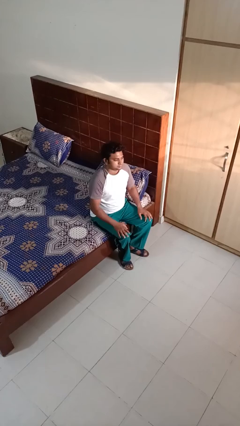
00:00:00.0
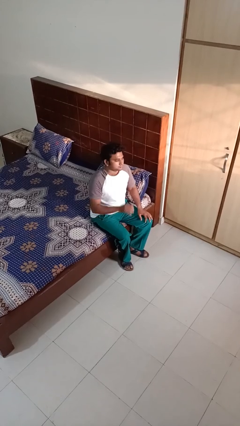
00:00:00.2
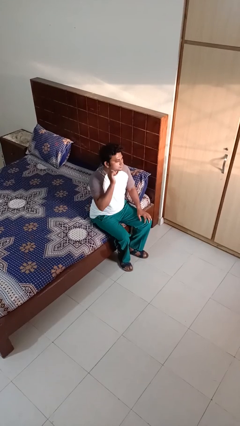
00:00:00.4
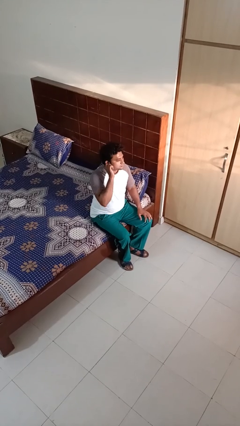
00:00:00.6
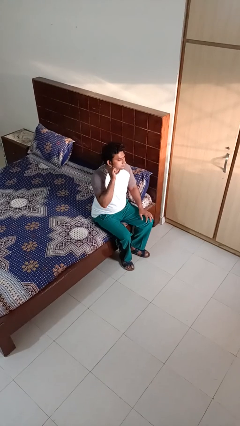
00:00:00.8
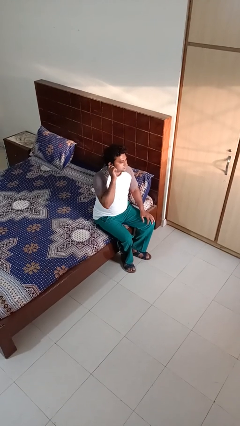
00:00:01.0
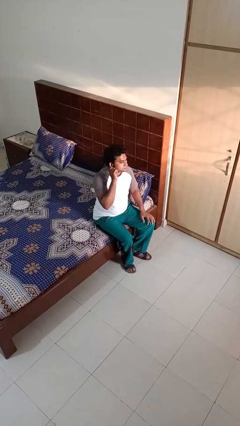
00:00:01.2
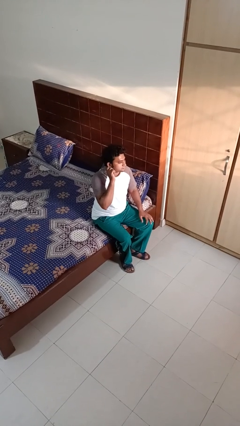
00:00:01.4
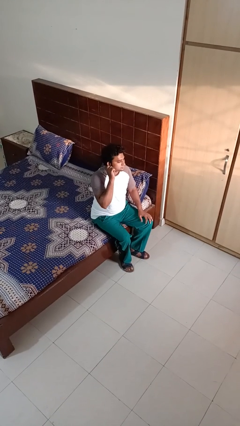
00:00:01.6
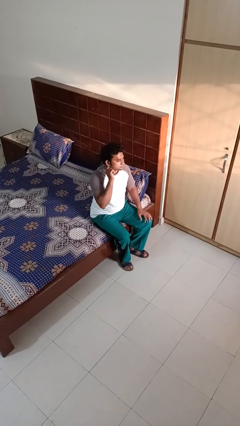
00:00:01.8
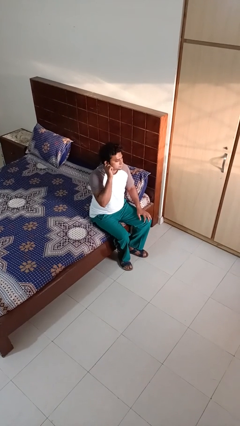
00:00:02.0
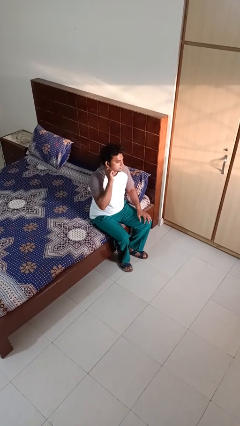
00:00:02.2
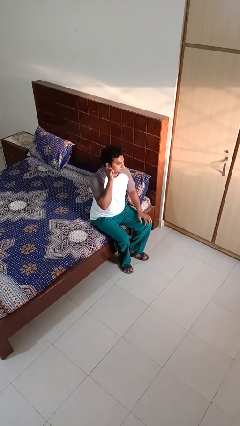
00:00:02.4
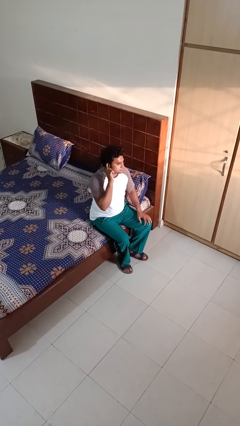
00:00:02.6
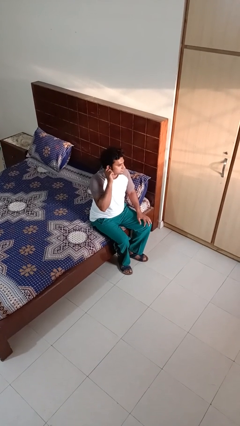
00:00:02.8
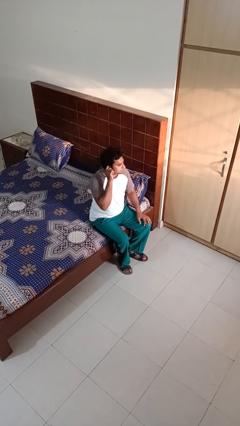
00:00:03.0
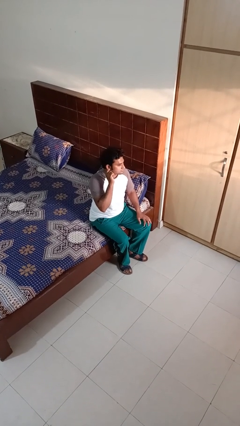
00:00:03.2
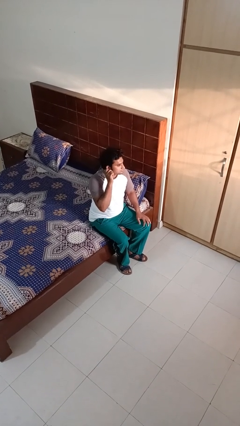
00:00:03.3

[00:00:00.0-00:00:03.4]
person touches earlobe

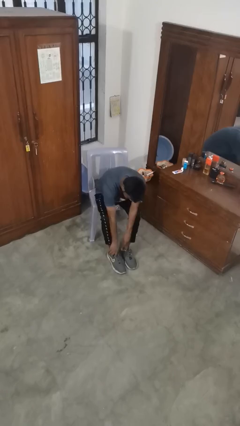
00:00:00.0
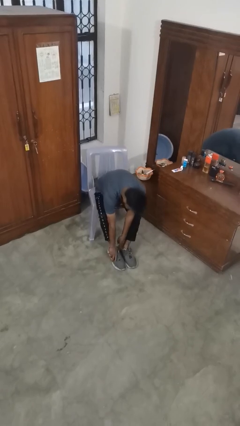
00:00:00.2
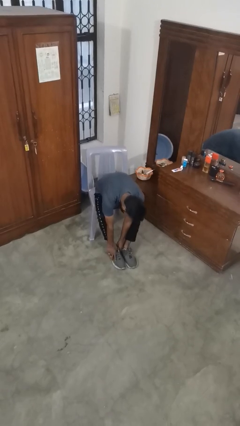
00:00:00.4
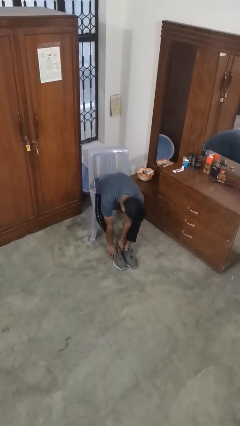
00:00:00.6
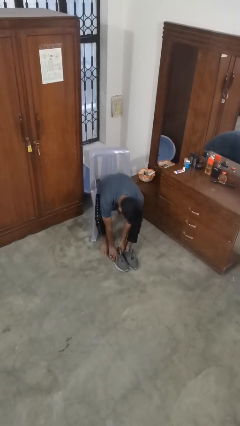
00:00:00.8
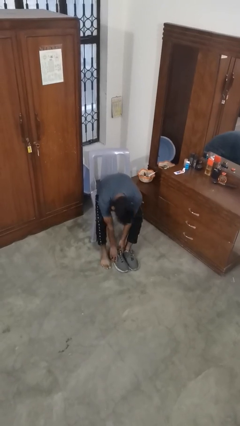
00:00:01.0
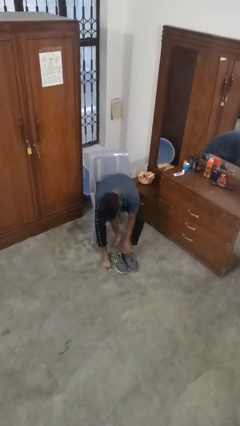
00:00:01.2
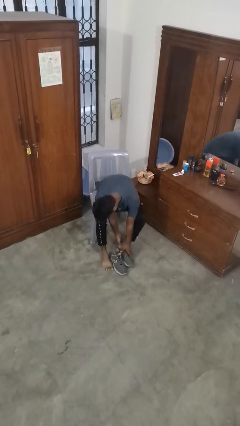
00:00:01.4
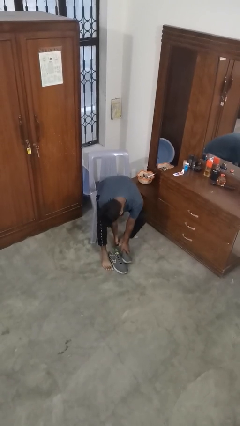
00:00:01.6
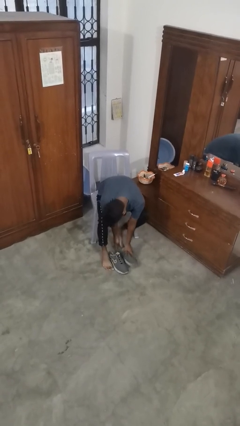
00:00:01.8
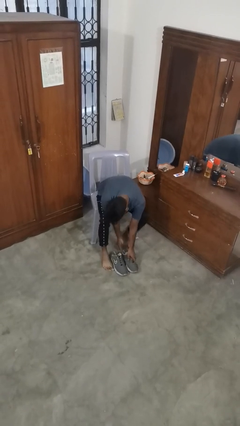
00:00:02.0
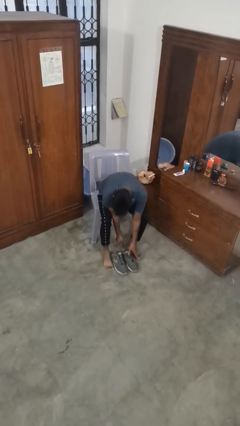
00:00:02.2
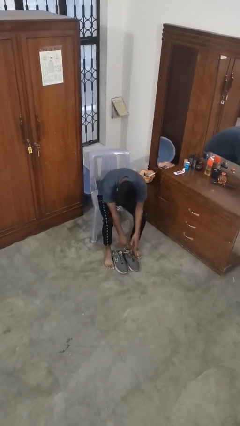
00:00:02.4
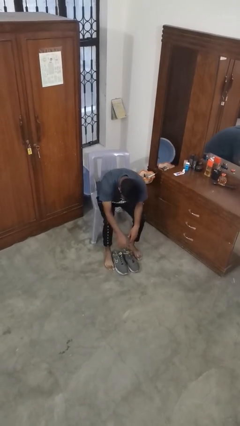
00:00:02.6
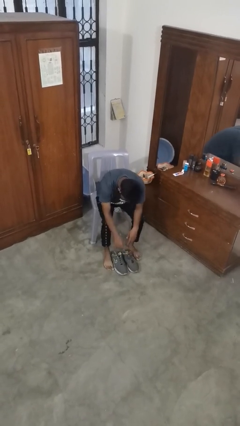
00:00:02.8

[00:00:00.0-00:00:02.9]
person takes off shoes

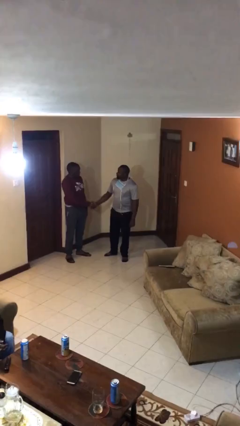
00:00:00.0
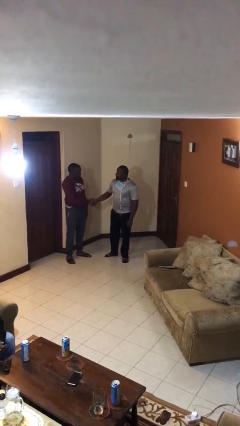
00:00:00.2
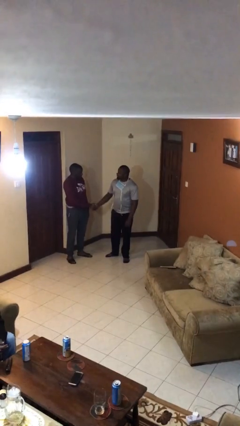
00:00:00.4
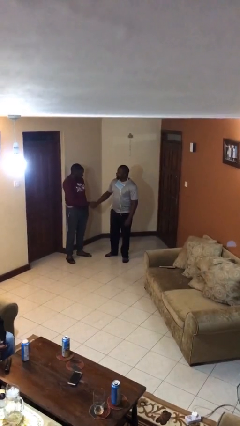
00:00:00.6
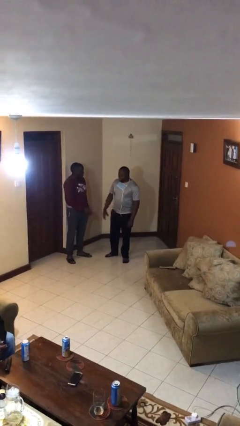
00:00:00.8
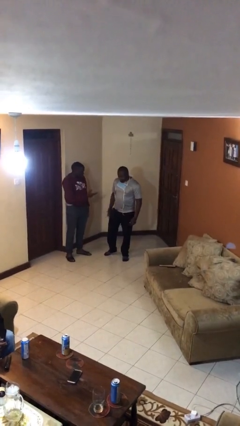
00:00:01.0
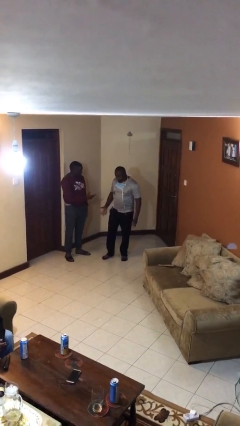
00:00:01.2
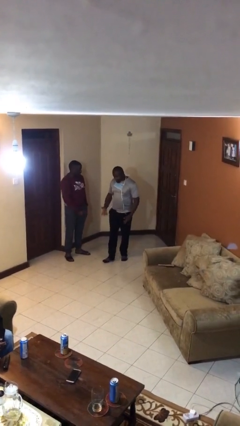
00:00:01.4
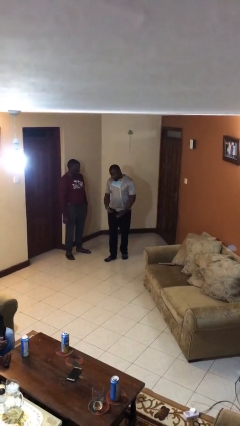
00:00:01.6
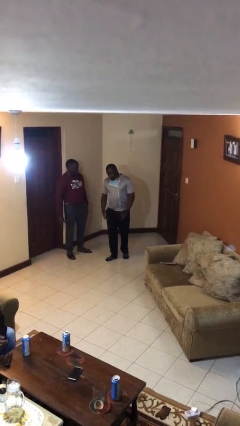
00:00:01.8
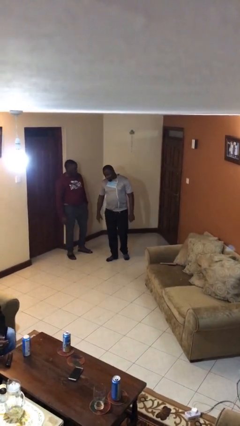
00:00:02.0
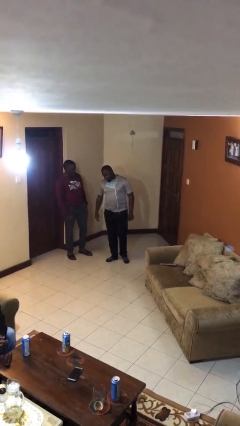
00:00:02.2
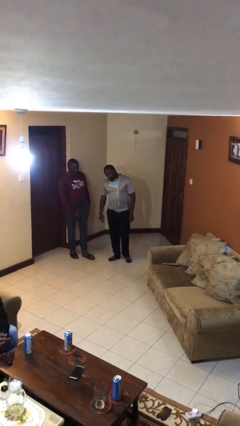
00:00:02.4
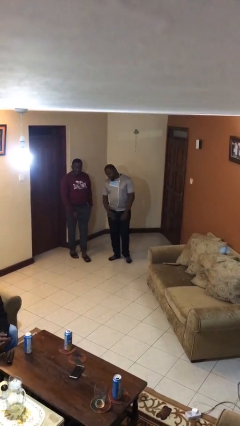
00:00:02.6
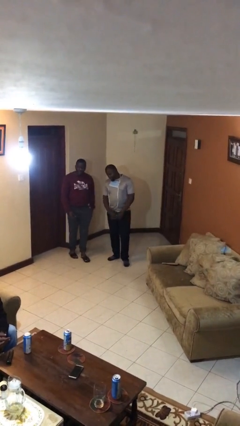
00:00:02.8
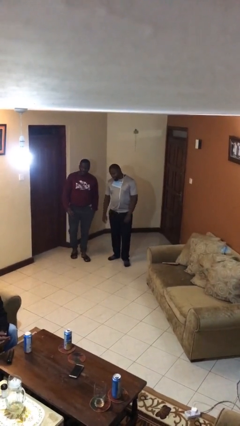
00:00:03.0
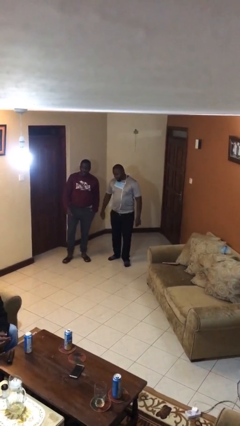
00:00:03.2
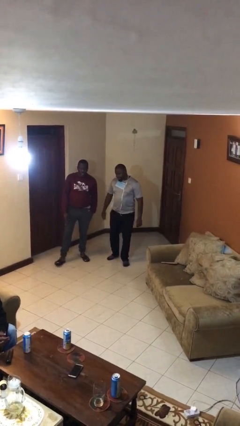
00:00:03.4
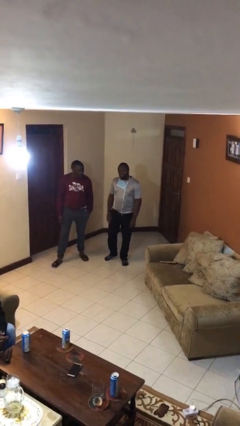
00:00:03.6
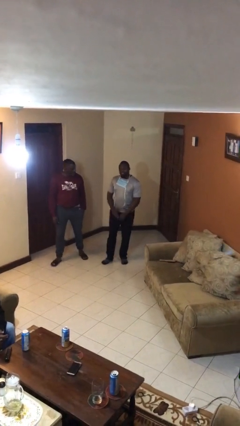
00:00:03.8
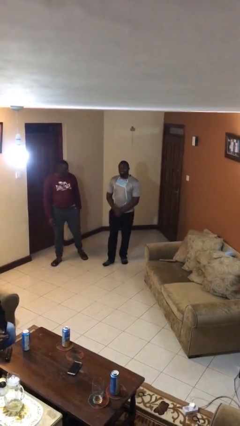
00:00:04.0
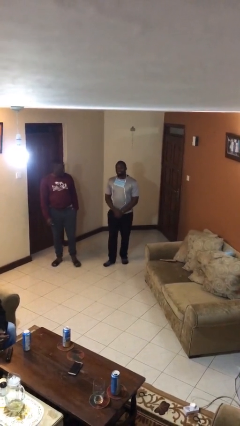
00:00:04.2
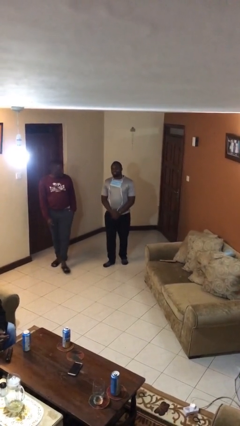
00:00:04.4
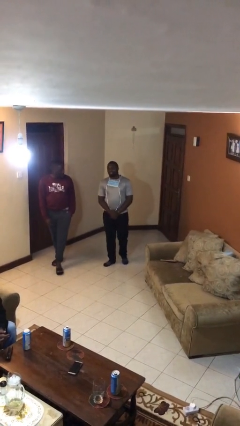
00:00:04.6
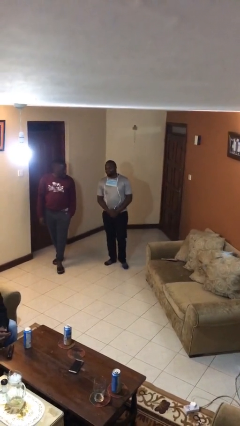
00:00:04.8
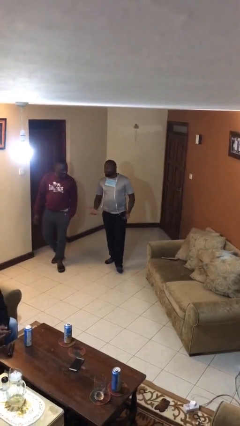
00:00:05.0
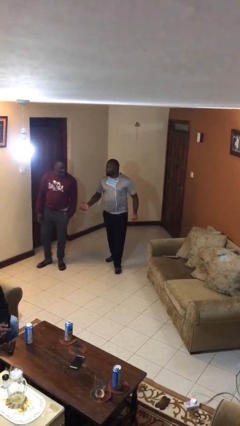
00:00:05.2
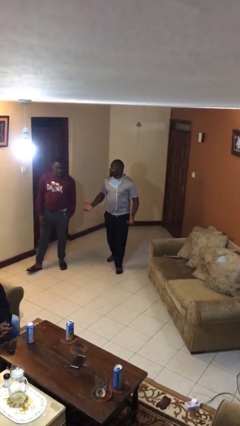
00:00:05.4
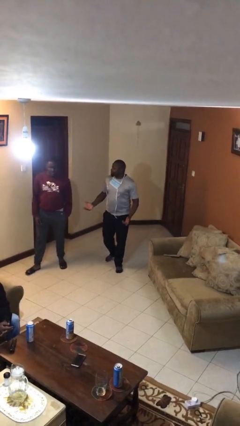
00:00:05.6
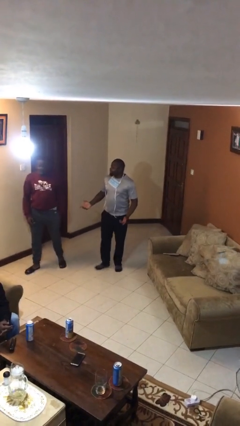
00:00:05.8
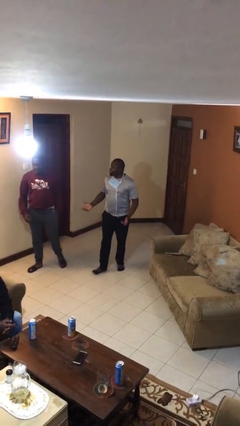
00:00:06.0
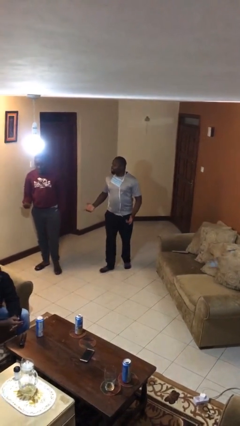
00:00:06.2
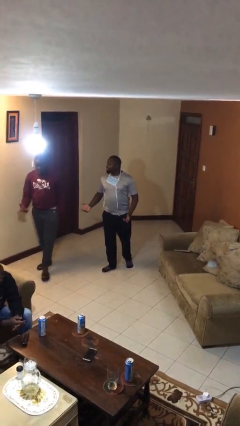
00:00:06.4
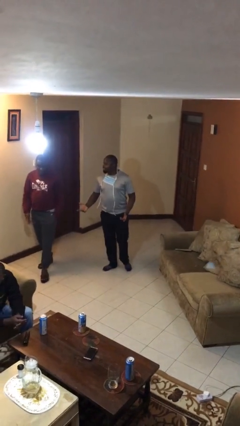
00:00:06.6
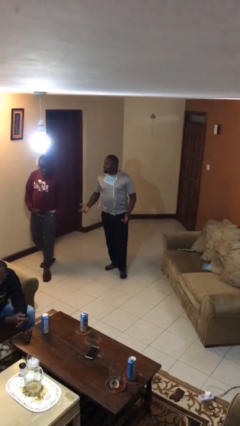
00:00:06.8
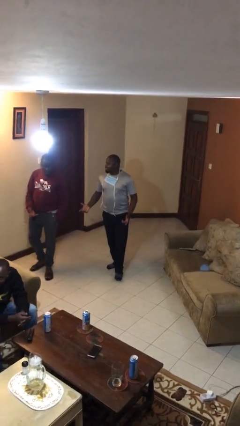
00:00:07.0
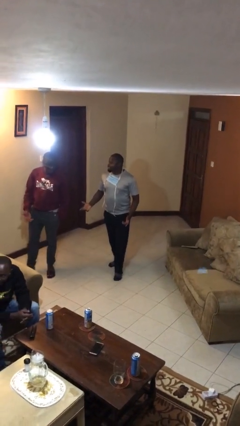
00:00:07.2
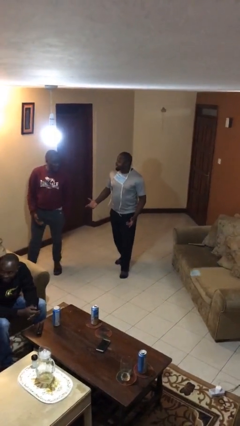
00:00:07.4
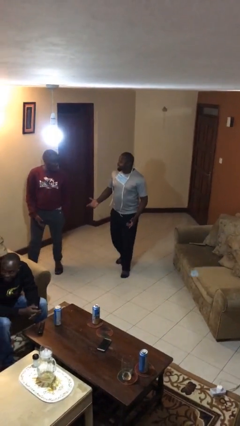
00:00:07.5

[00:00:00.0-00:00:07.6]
person talks to person

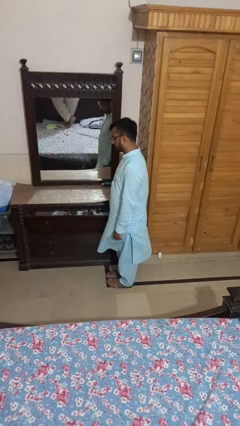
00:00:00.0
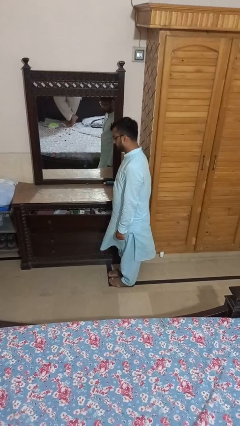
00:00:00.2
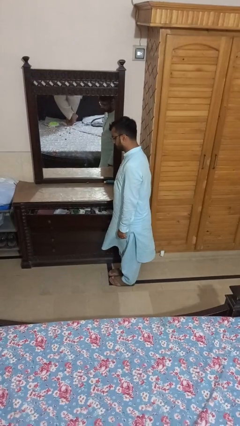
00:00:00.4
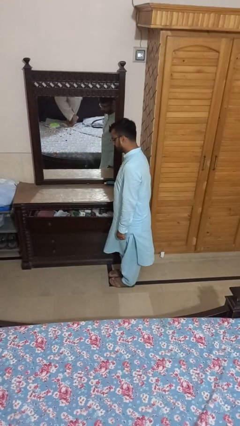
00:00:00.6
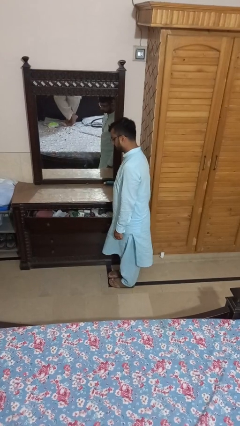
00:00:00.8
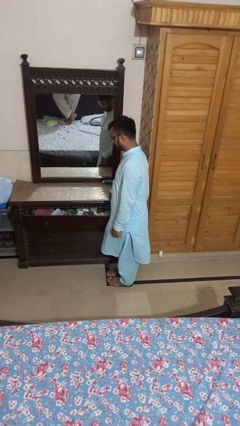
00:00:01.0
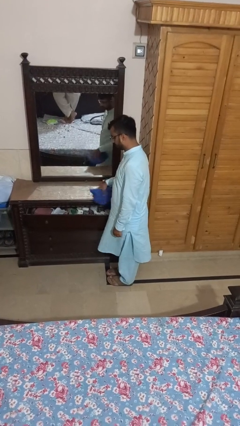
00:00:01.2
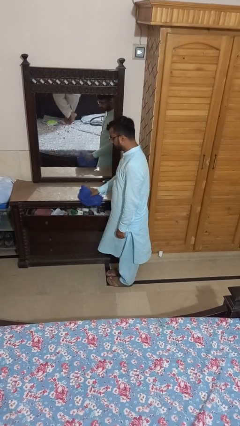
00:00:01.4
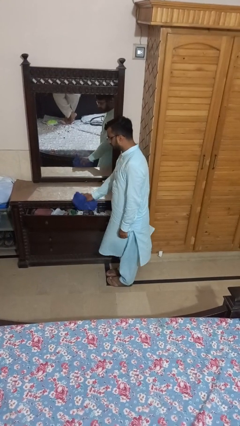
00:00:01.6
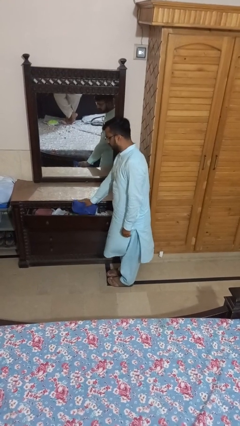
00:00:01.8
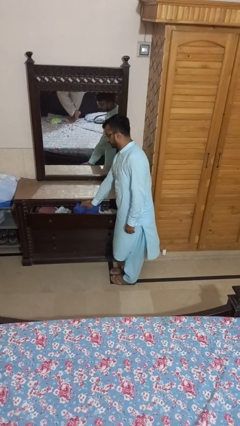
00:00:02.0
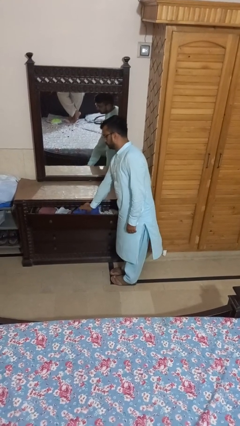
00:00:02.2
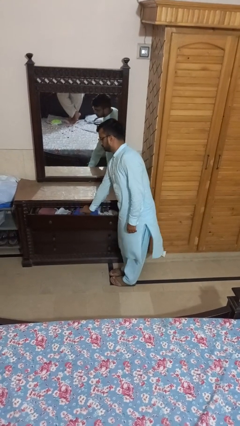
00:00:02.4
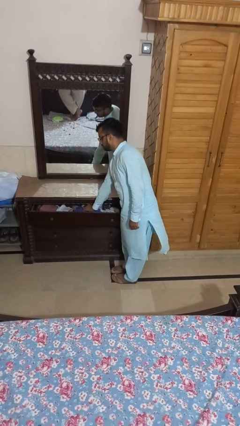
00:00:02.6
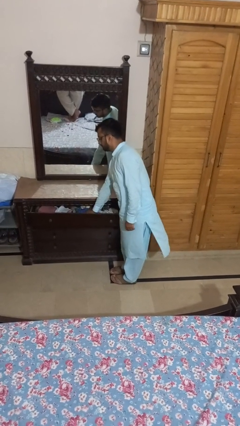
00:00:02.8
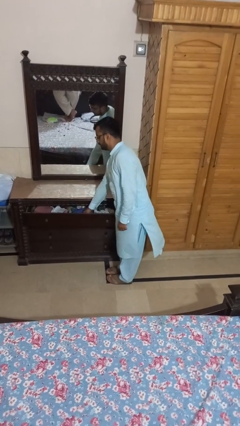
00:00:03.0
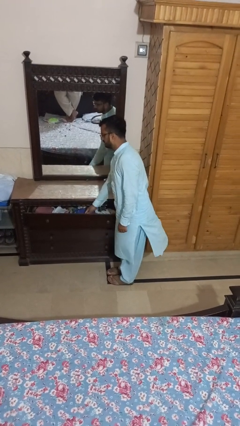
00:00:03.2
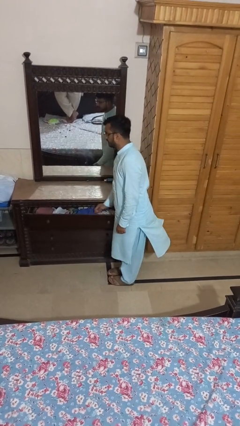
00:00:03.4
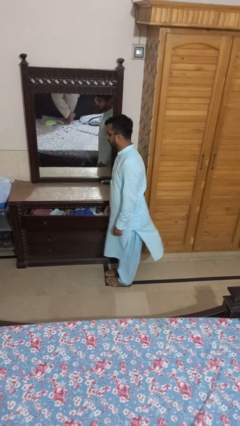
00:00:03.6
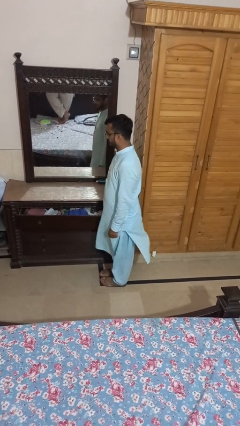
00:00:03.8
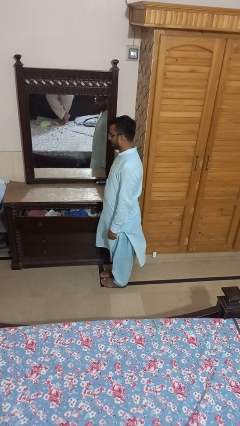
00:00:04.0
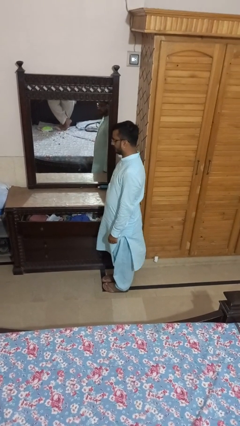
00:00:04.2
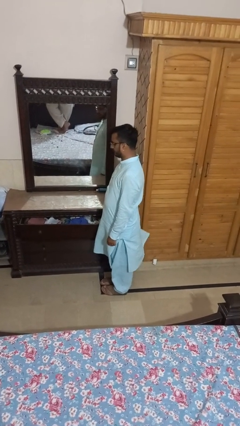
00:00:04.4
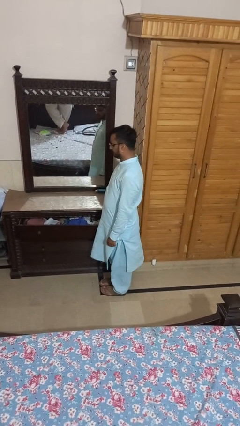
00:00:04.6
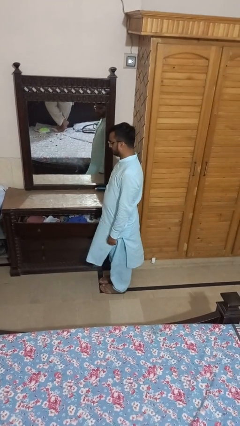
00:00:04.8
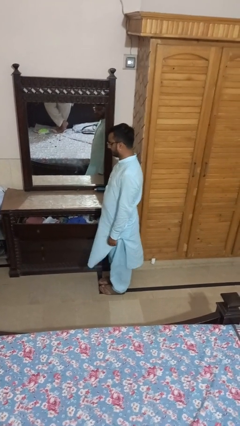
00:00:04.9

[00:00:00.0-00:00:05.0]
person puts clothes into dresser
